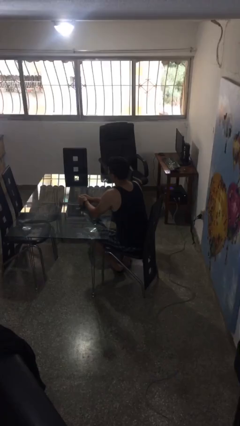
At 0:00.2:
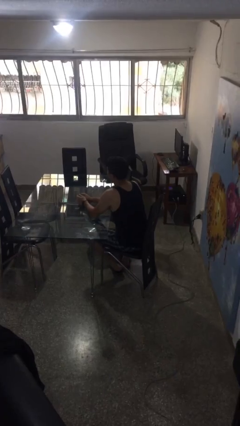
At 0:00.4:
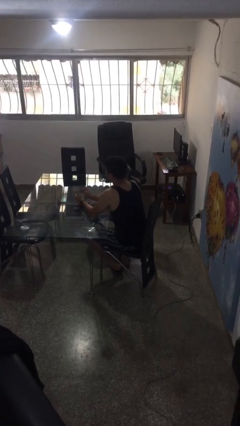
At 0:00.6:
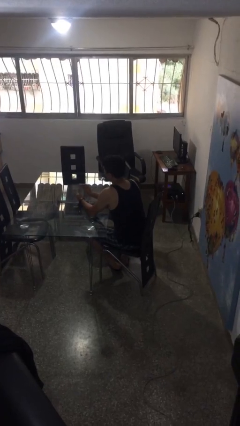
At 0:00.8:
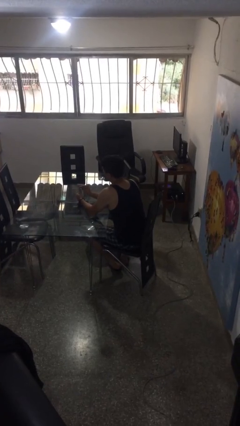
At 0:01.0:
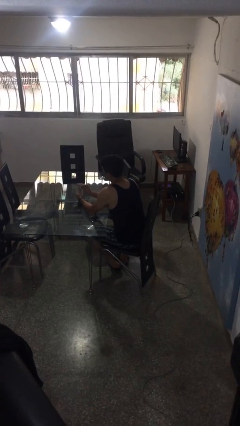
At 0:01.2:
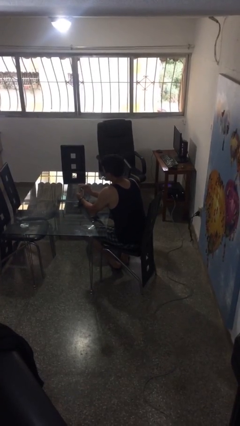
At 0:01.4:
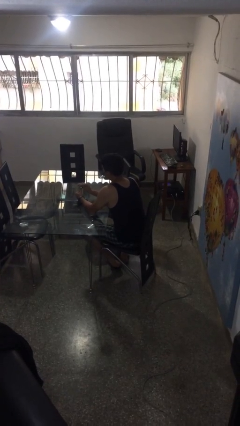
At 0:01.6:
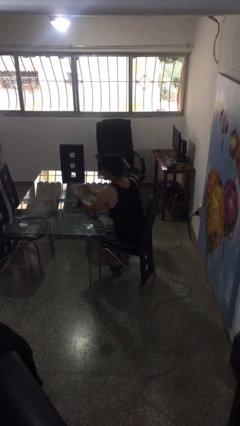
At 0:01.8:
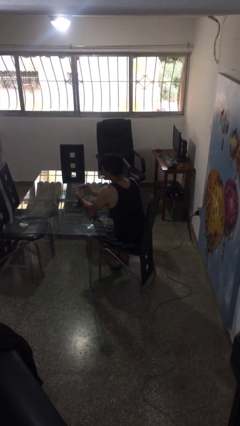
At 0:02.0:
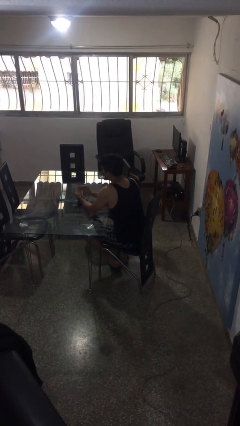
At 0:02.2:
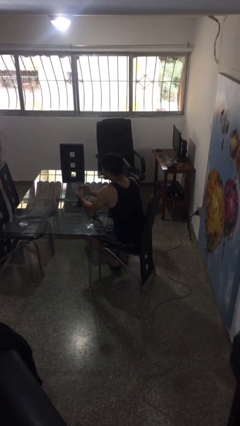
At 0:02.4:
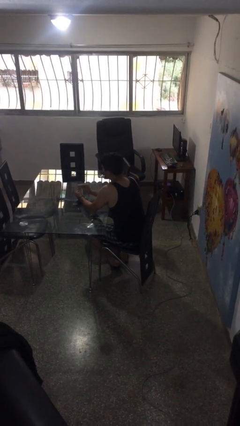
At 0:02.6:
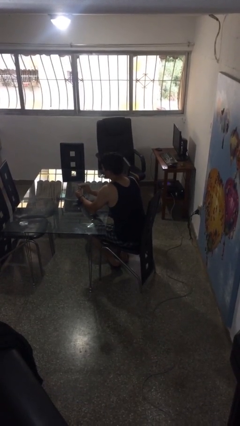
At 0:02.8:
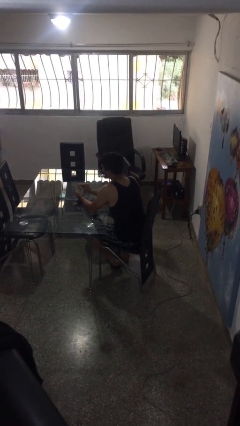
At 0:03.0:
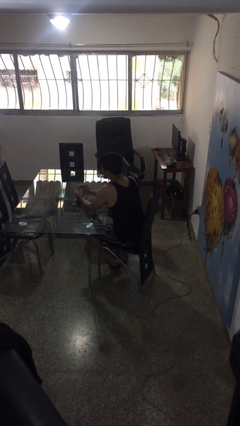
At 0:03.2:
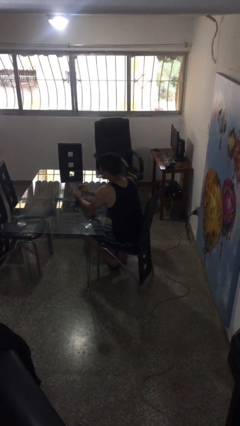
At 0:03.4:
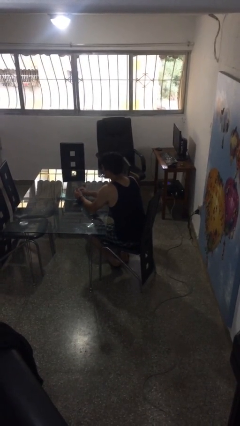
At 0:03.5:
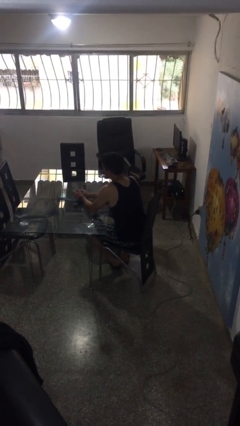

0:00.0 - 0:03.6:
person files fingernails

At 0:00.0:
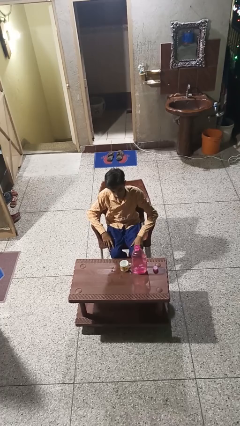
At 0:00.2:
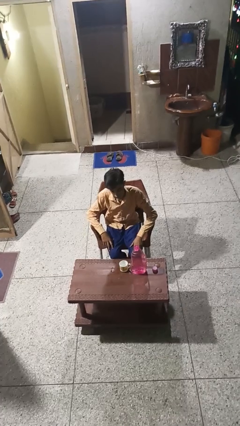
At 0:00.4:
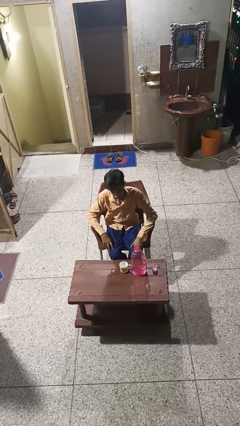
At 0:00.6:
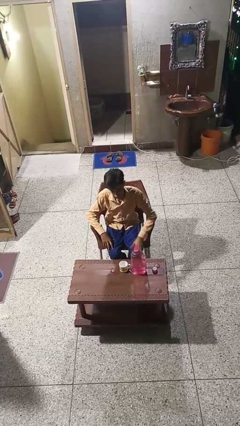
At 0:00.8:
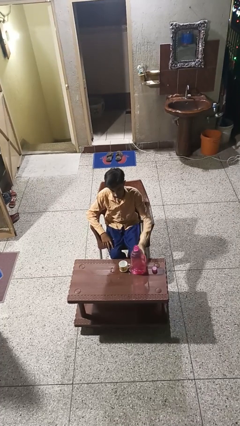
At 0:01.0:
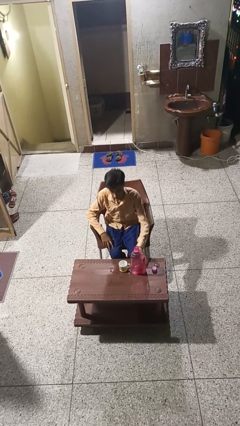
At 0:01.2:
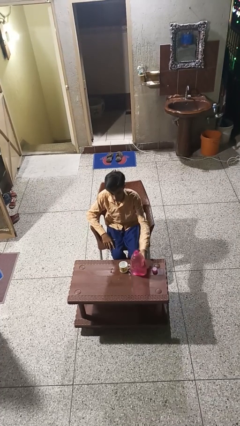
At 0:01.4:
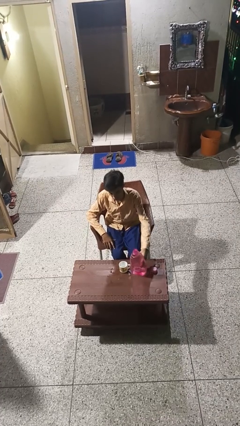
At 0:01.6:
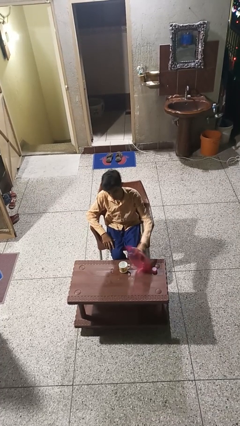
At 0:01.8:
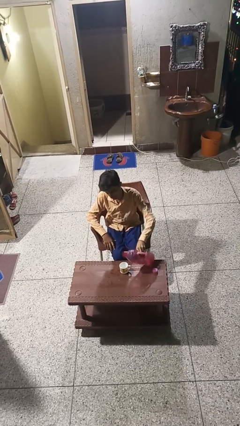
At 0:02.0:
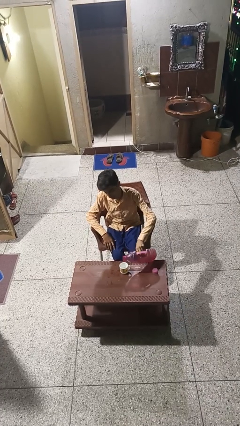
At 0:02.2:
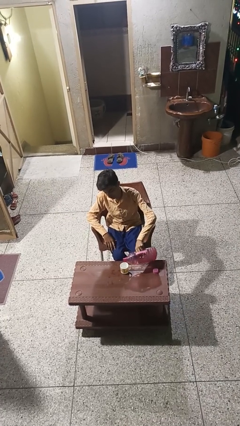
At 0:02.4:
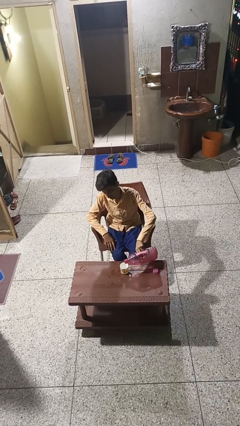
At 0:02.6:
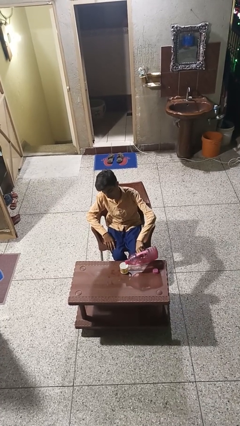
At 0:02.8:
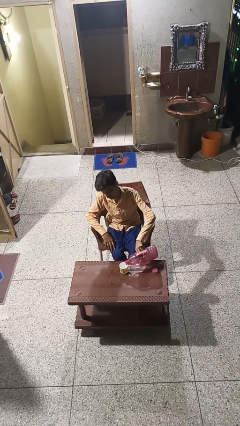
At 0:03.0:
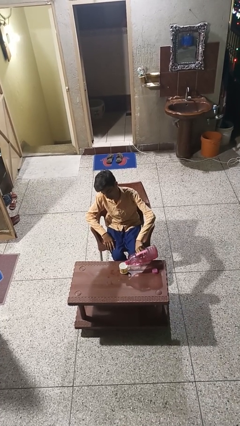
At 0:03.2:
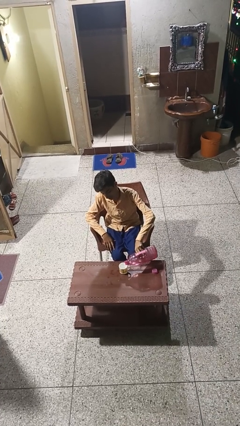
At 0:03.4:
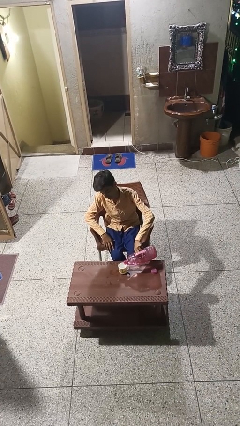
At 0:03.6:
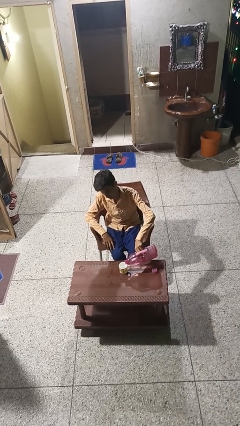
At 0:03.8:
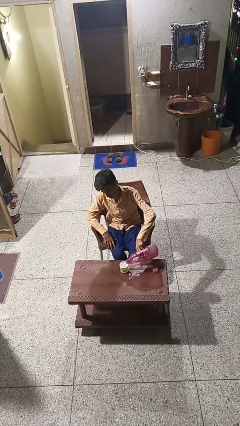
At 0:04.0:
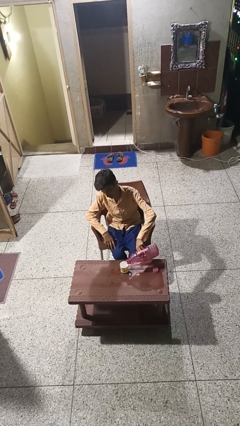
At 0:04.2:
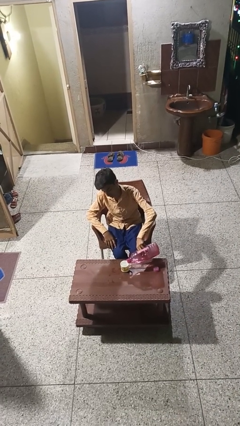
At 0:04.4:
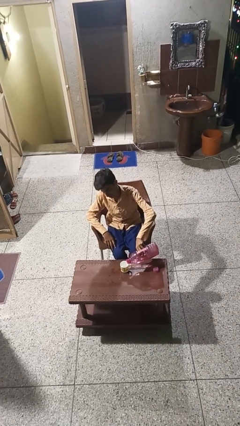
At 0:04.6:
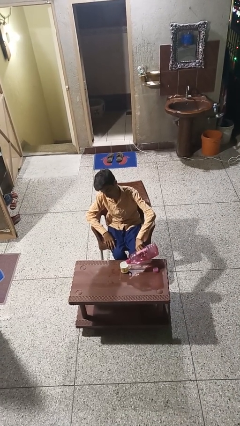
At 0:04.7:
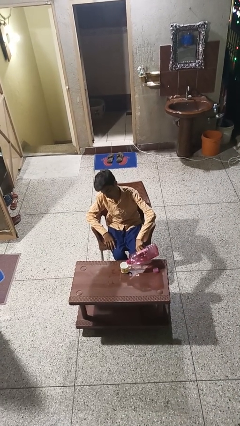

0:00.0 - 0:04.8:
person pours liquid into cup

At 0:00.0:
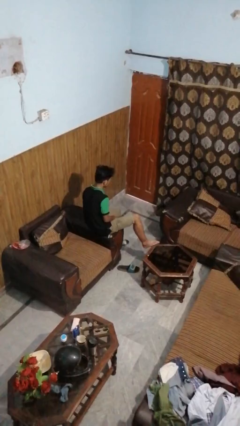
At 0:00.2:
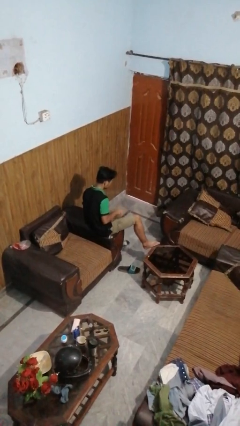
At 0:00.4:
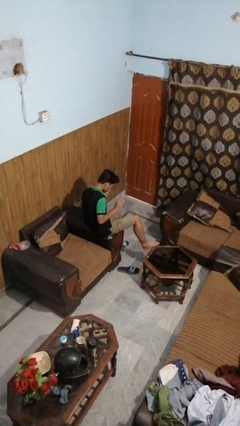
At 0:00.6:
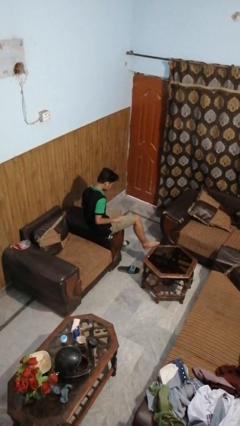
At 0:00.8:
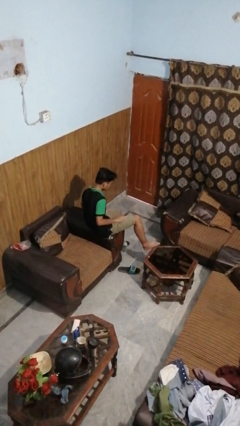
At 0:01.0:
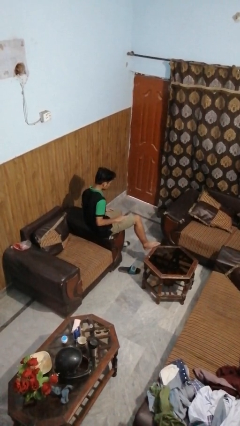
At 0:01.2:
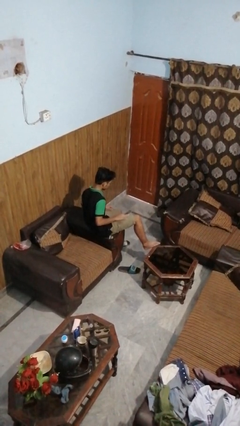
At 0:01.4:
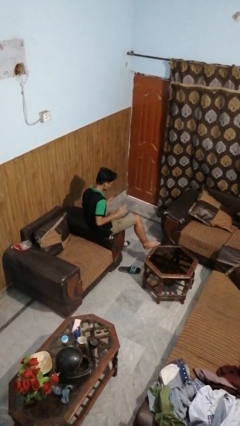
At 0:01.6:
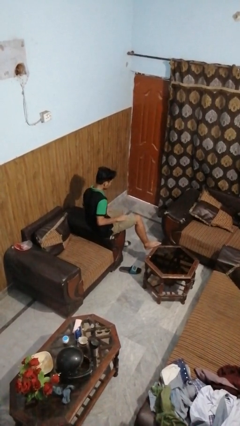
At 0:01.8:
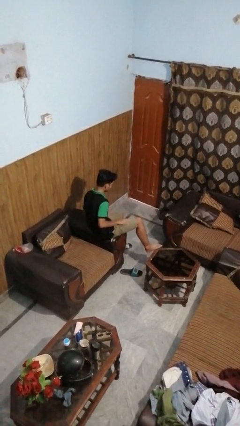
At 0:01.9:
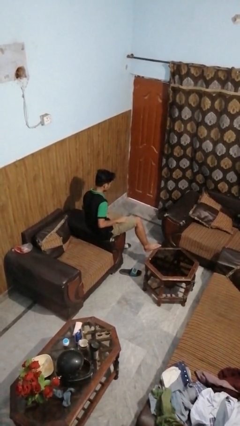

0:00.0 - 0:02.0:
person slaps hands on thighs

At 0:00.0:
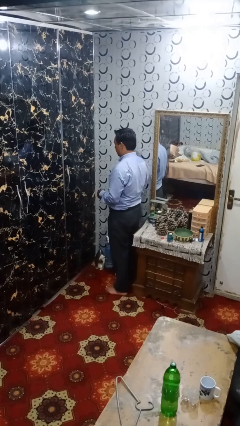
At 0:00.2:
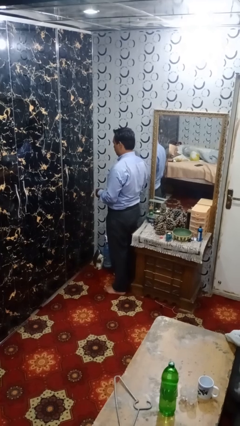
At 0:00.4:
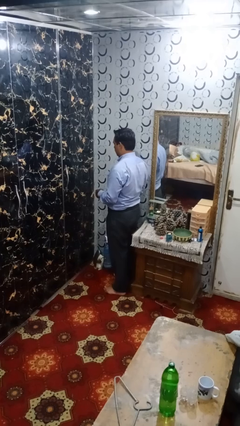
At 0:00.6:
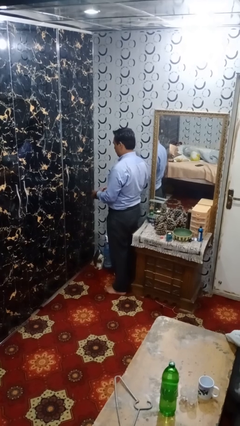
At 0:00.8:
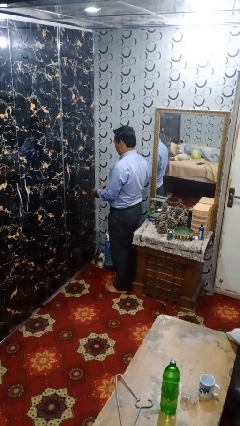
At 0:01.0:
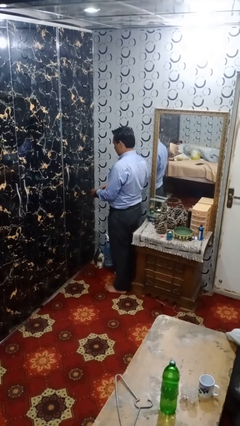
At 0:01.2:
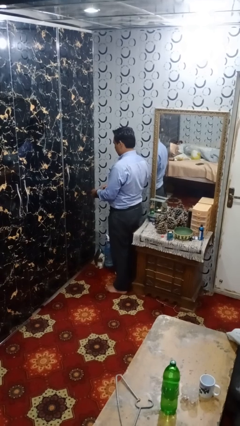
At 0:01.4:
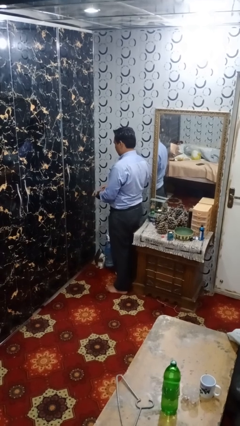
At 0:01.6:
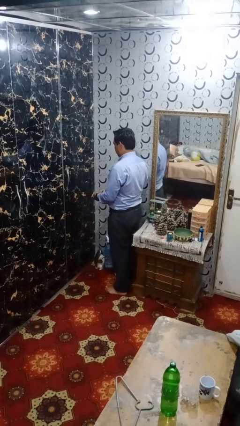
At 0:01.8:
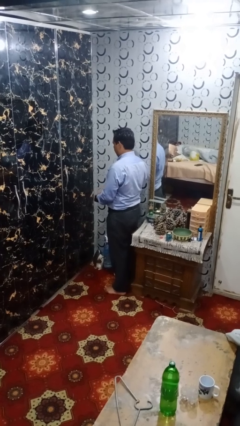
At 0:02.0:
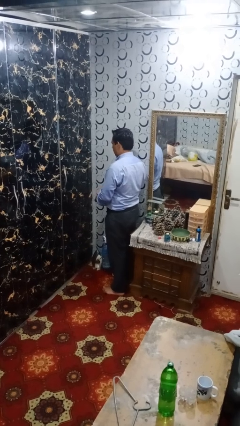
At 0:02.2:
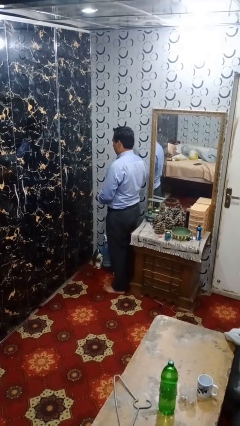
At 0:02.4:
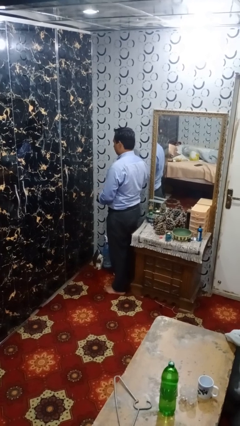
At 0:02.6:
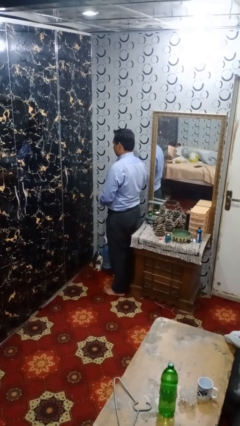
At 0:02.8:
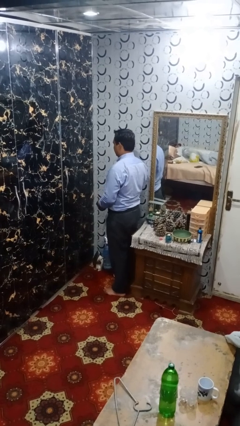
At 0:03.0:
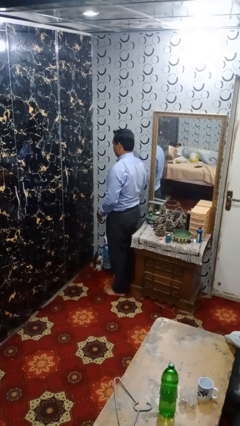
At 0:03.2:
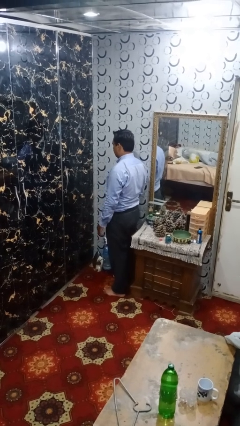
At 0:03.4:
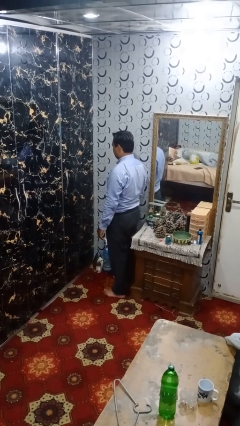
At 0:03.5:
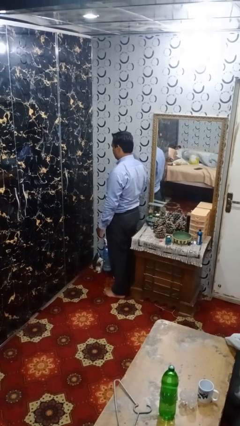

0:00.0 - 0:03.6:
person takes off wristwatch

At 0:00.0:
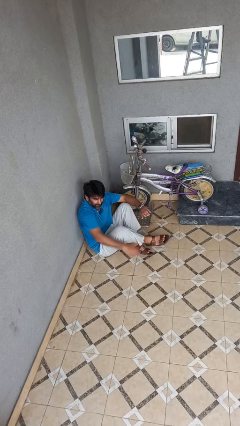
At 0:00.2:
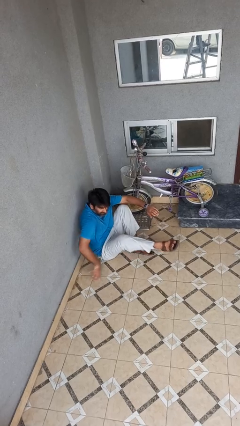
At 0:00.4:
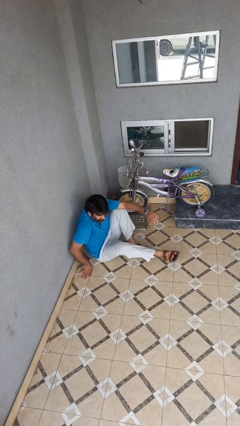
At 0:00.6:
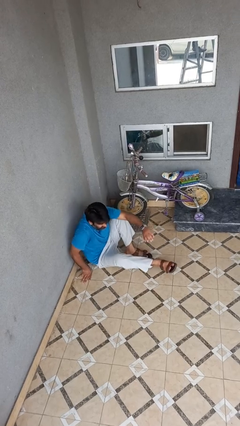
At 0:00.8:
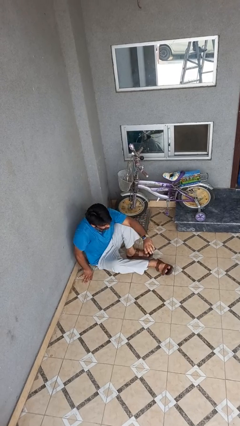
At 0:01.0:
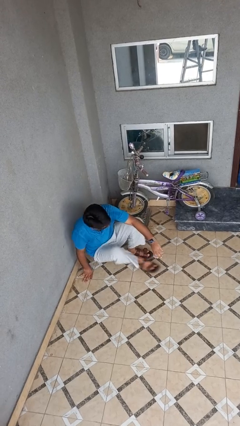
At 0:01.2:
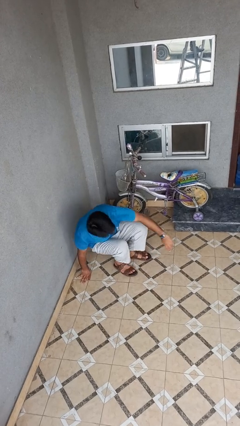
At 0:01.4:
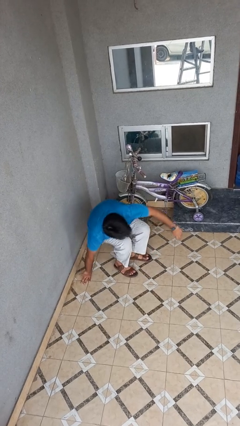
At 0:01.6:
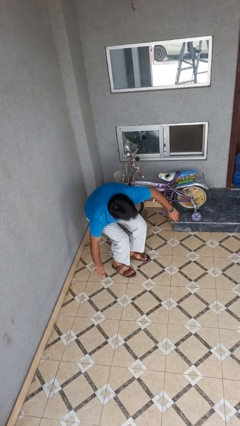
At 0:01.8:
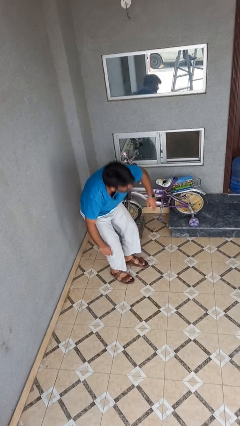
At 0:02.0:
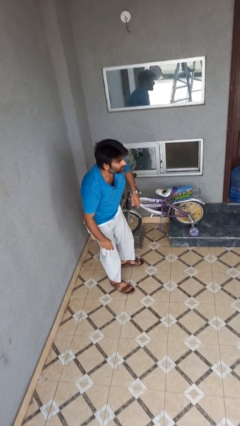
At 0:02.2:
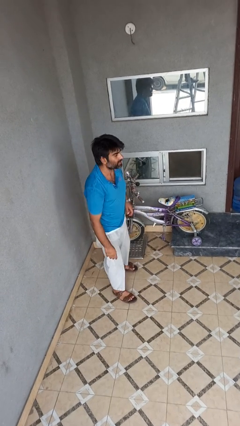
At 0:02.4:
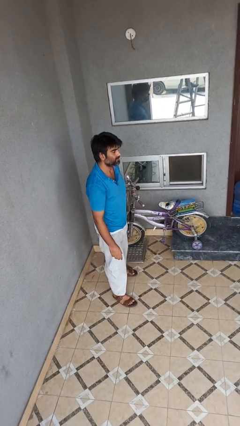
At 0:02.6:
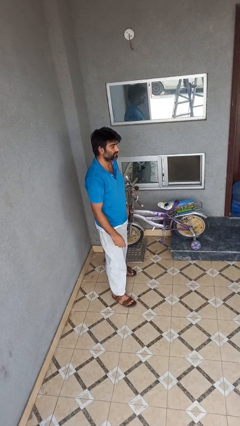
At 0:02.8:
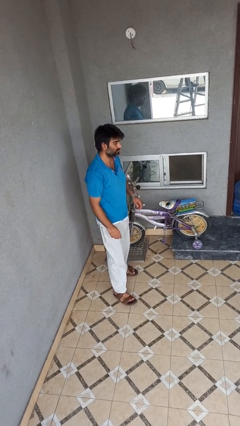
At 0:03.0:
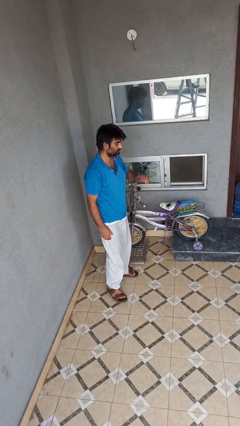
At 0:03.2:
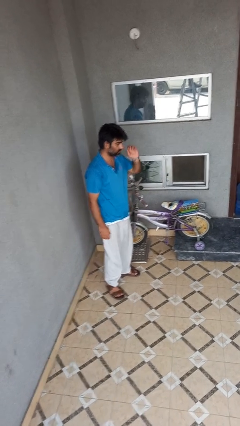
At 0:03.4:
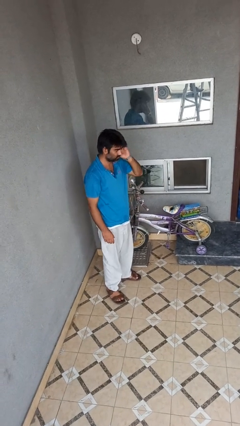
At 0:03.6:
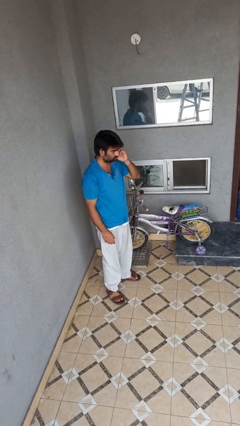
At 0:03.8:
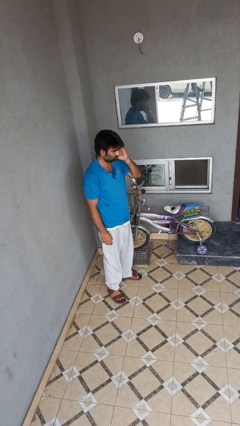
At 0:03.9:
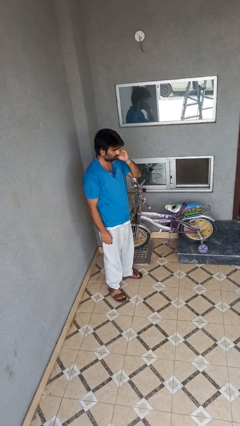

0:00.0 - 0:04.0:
person stands up from floor
